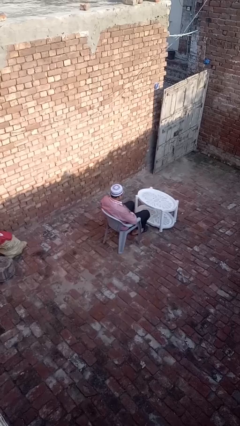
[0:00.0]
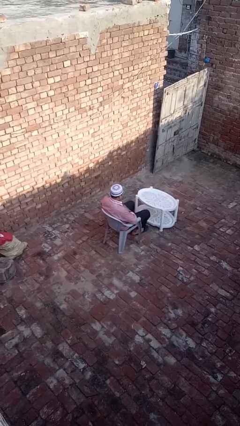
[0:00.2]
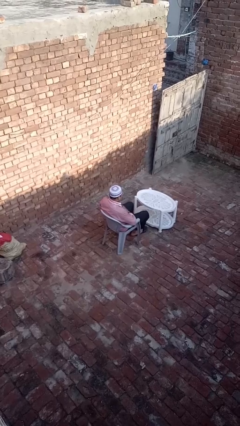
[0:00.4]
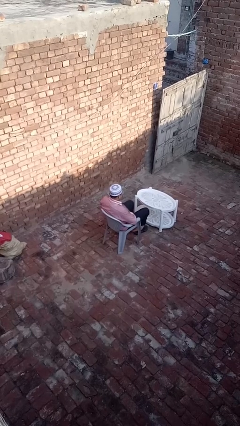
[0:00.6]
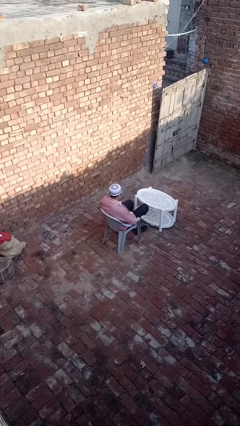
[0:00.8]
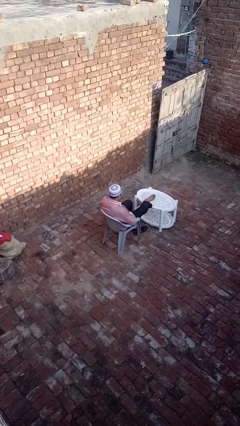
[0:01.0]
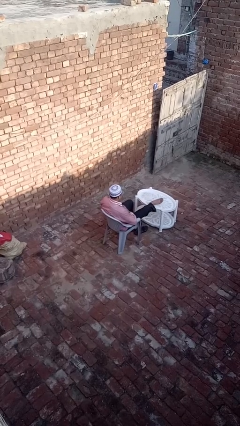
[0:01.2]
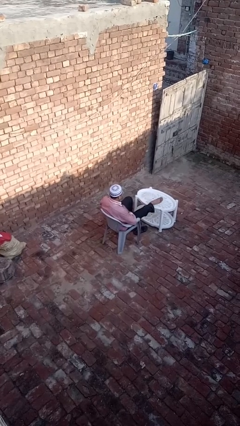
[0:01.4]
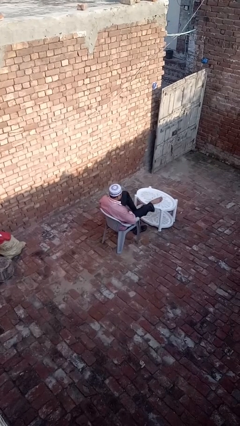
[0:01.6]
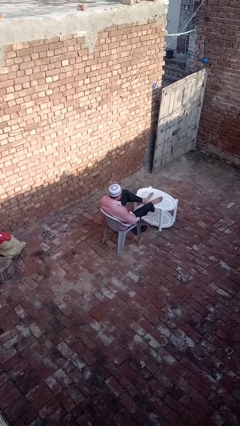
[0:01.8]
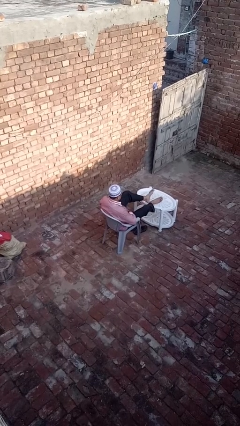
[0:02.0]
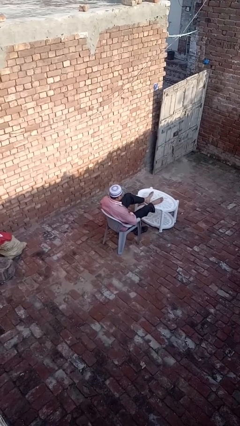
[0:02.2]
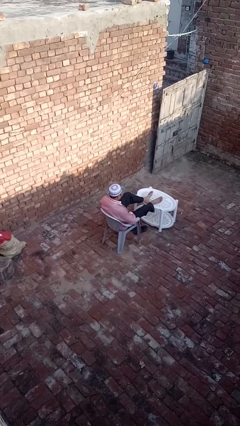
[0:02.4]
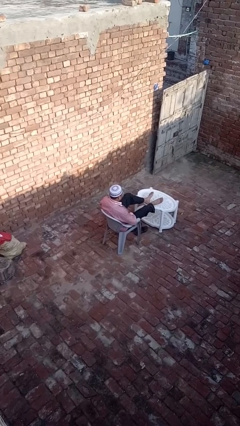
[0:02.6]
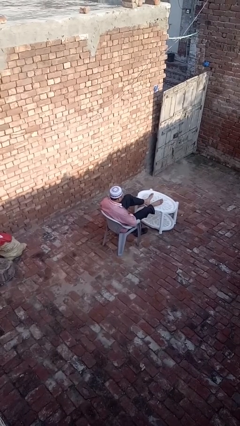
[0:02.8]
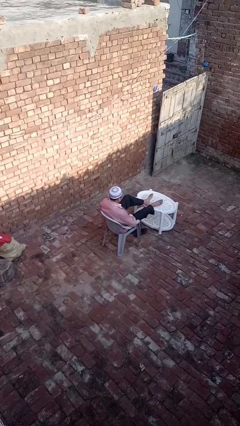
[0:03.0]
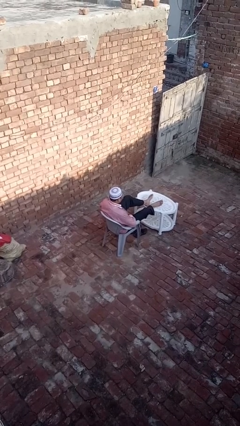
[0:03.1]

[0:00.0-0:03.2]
person puts feet up

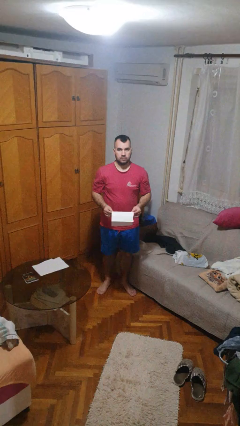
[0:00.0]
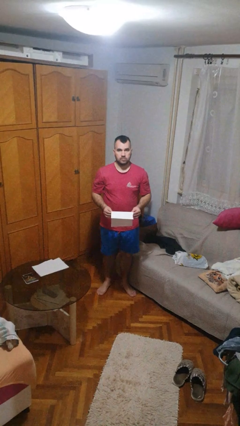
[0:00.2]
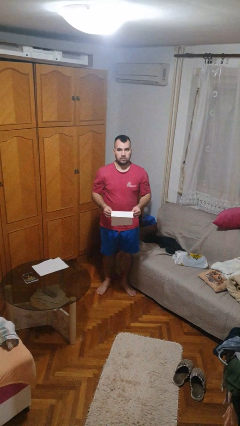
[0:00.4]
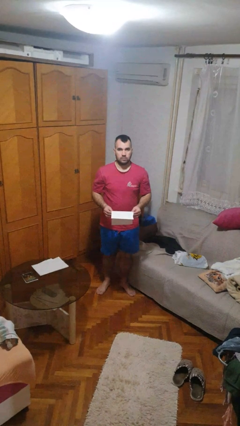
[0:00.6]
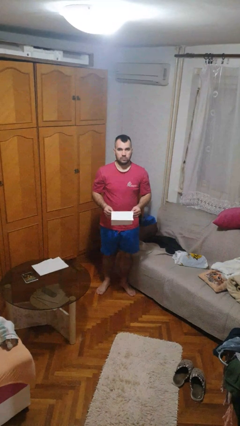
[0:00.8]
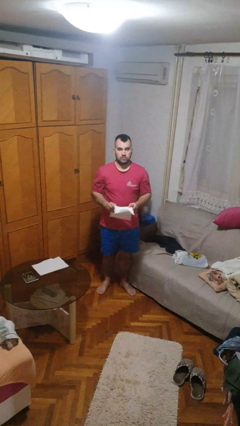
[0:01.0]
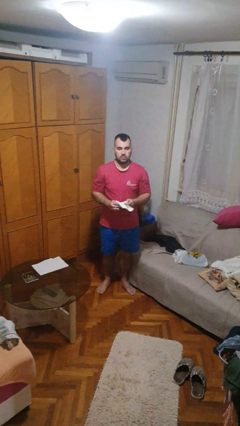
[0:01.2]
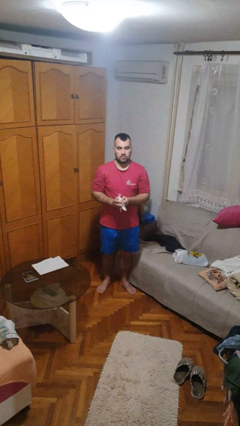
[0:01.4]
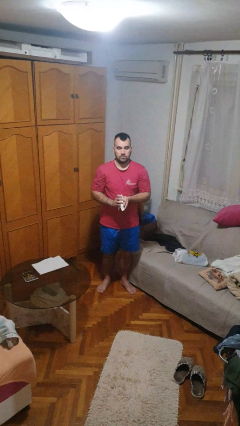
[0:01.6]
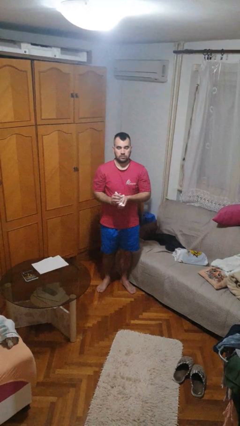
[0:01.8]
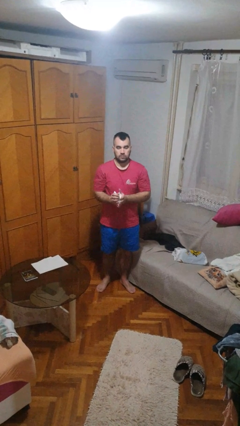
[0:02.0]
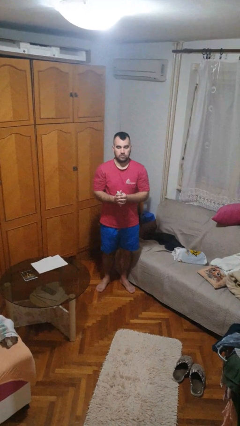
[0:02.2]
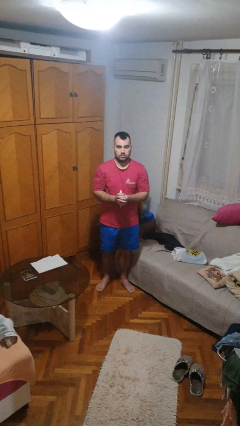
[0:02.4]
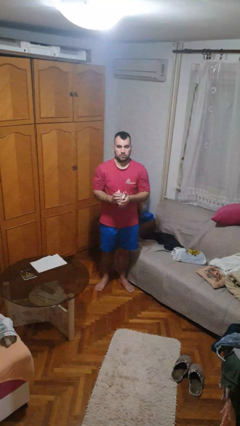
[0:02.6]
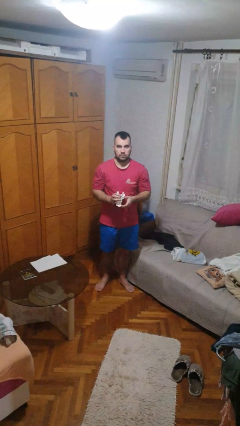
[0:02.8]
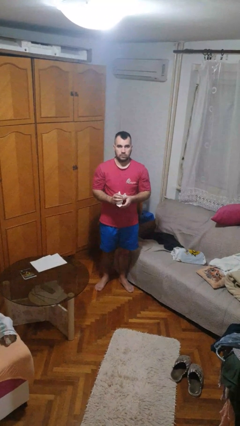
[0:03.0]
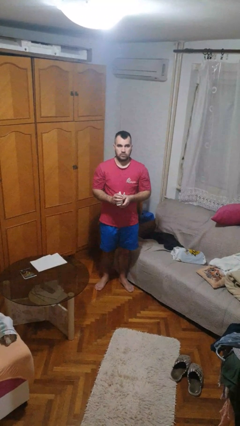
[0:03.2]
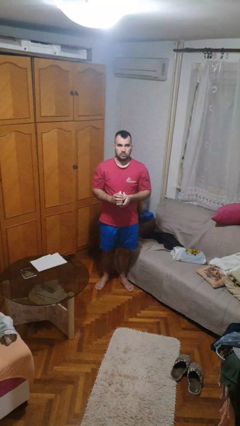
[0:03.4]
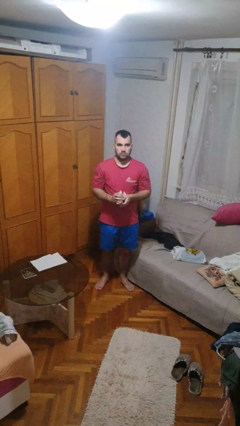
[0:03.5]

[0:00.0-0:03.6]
person crumples paper

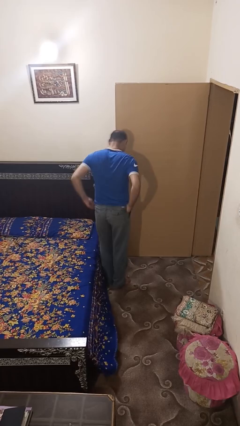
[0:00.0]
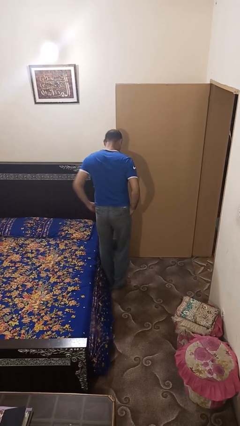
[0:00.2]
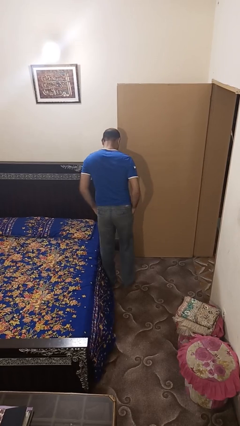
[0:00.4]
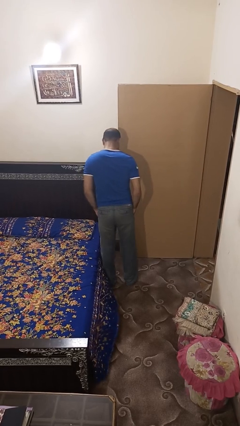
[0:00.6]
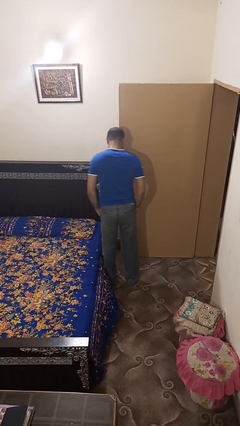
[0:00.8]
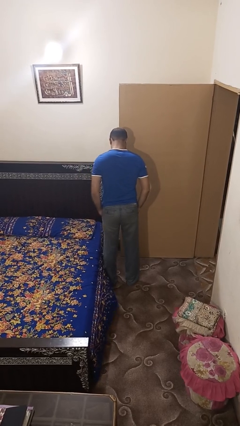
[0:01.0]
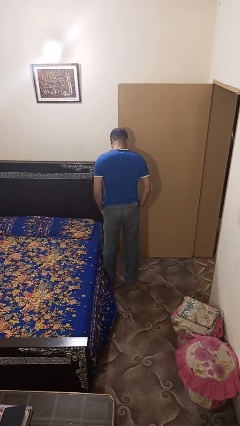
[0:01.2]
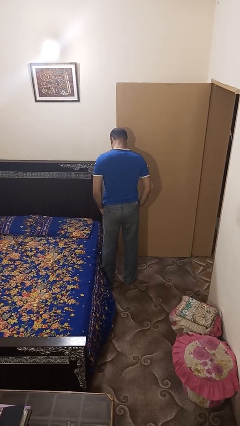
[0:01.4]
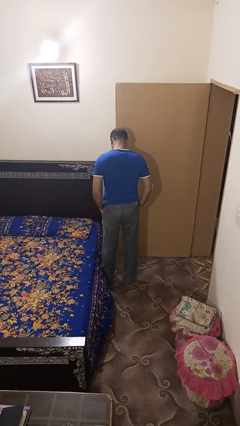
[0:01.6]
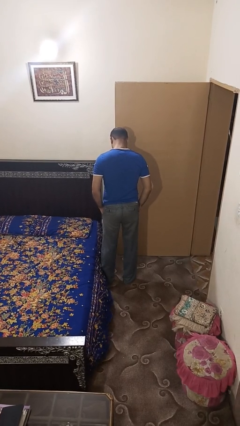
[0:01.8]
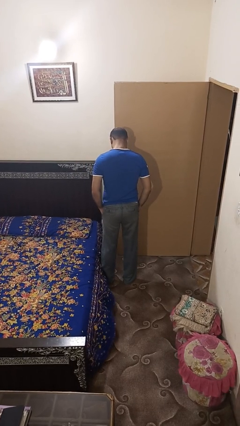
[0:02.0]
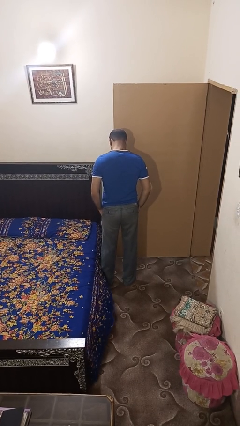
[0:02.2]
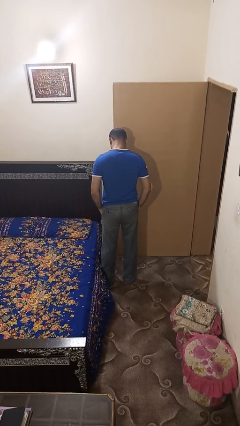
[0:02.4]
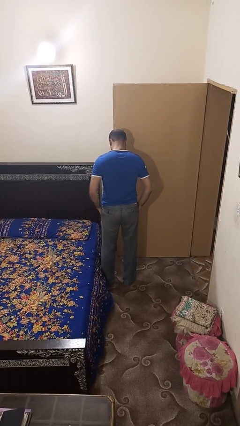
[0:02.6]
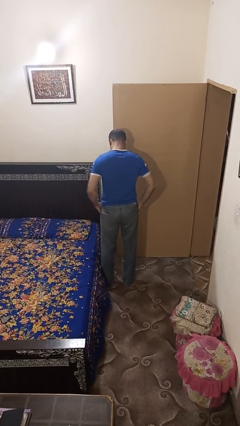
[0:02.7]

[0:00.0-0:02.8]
person puts hands in back pockets

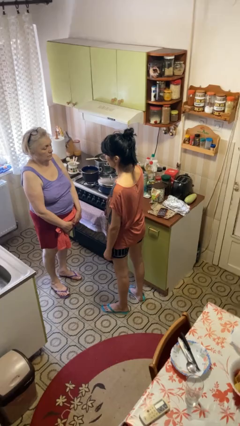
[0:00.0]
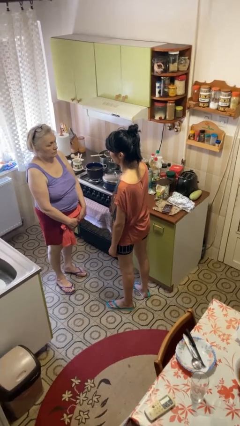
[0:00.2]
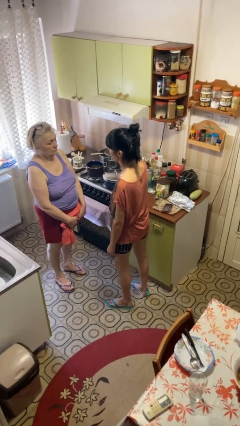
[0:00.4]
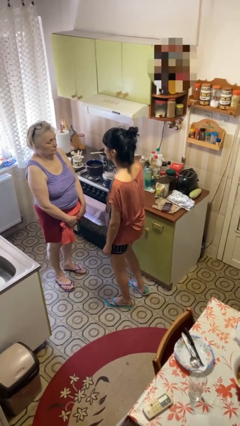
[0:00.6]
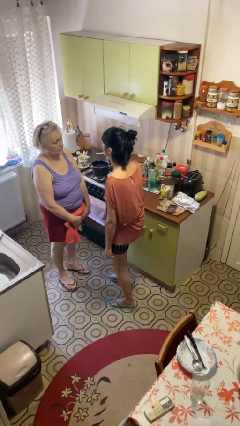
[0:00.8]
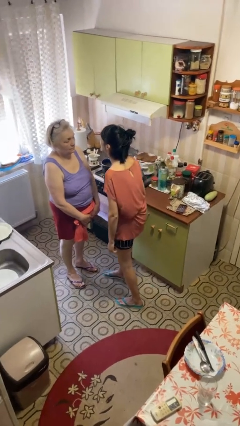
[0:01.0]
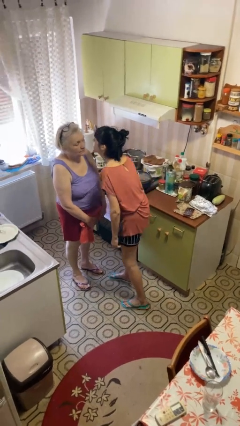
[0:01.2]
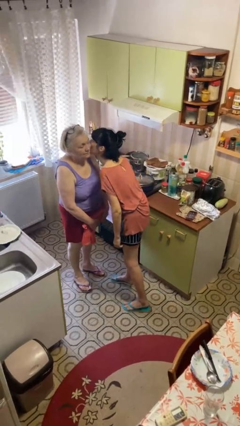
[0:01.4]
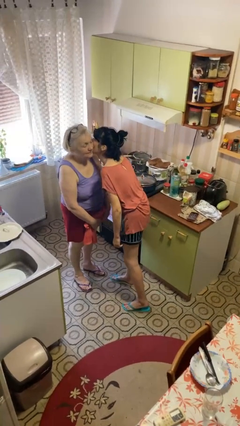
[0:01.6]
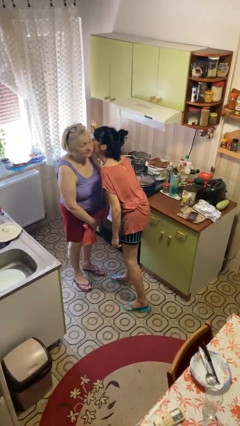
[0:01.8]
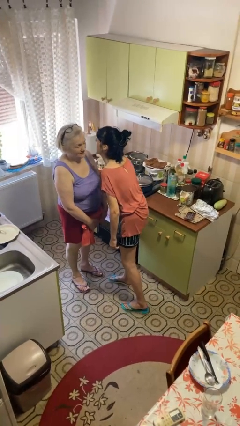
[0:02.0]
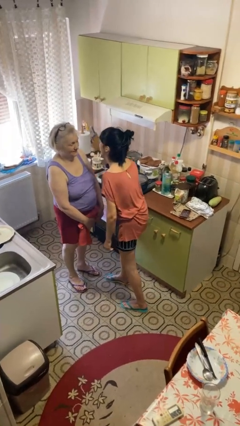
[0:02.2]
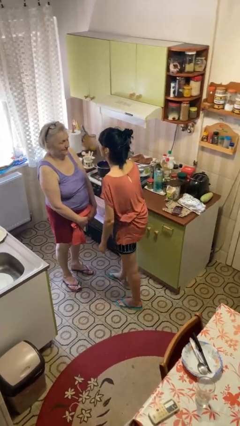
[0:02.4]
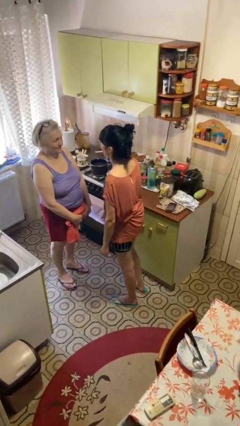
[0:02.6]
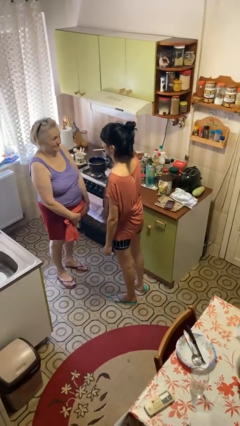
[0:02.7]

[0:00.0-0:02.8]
person kisses cheek of person

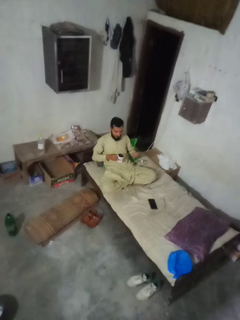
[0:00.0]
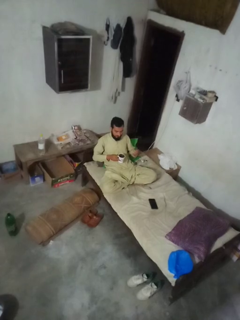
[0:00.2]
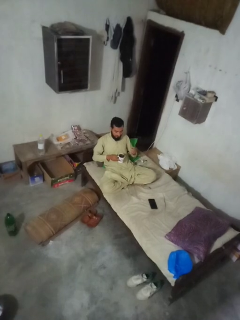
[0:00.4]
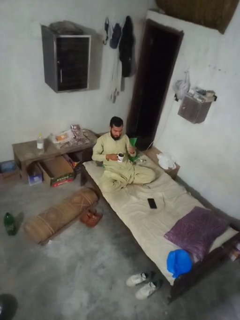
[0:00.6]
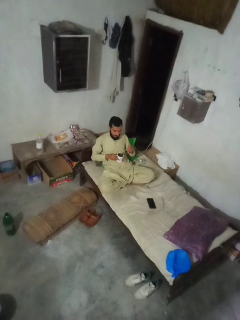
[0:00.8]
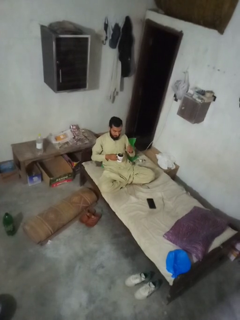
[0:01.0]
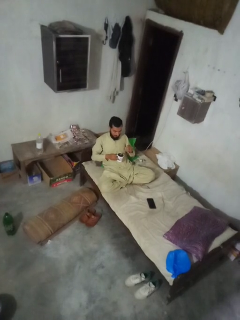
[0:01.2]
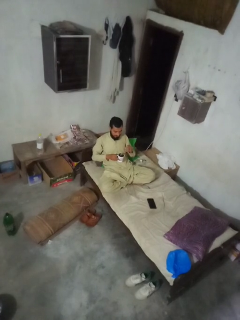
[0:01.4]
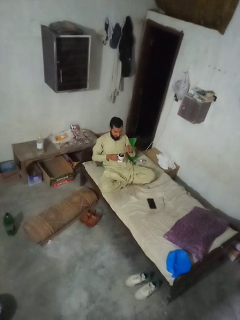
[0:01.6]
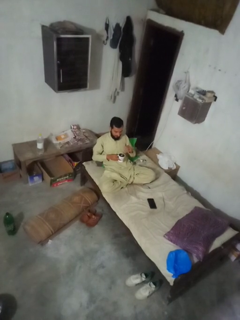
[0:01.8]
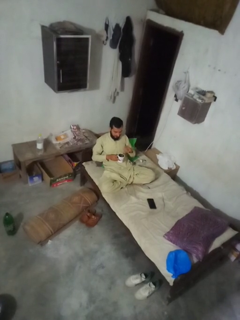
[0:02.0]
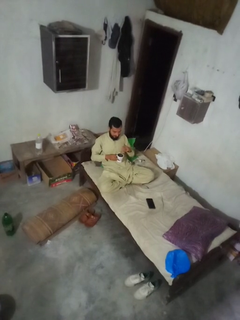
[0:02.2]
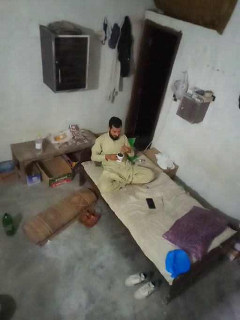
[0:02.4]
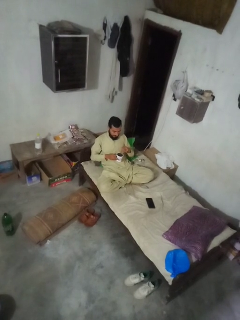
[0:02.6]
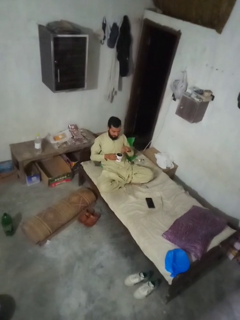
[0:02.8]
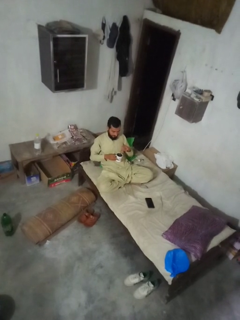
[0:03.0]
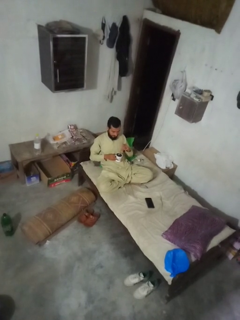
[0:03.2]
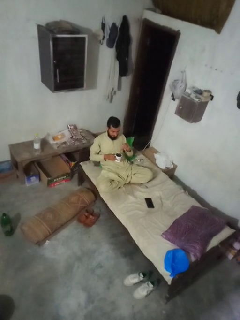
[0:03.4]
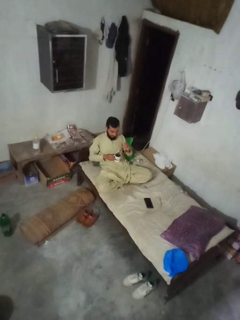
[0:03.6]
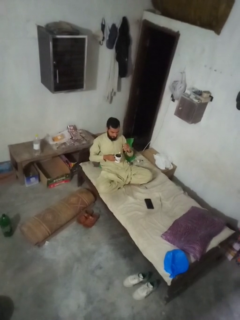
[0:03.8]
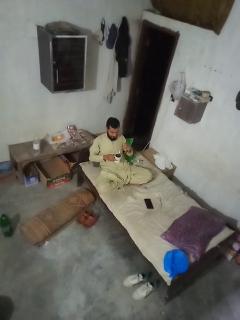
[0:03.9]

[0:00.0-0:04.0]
person stirs mug

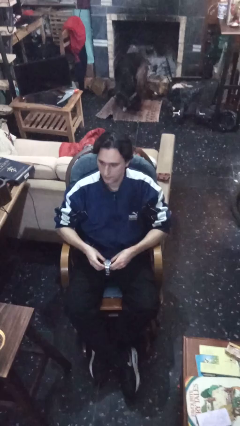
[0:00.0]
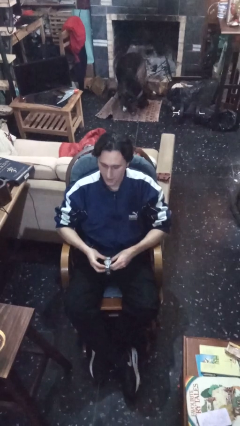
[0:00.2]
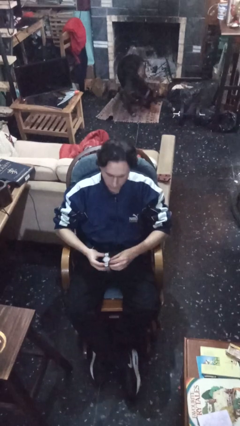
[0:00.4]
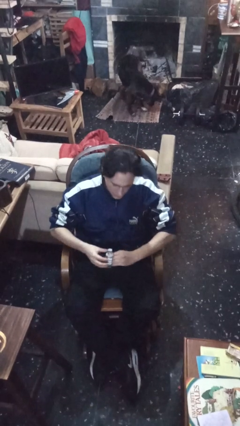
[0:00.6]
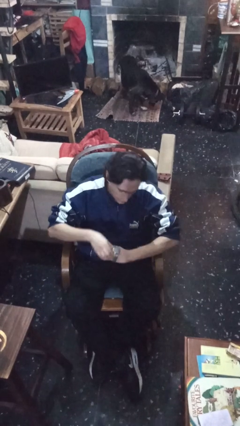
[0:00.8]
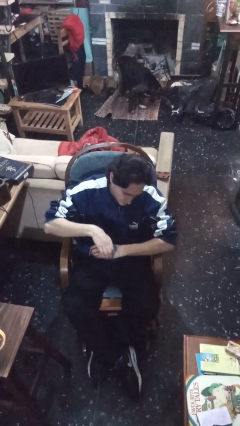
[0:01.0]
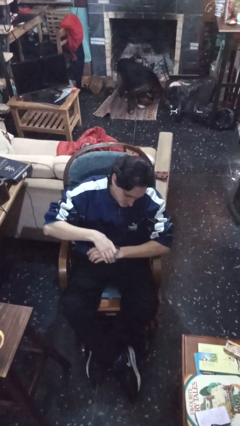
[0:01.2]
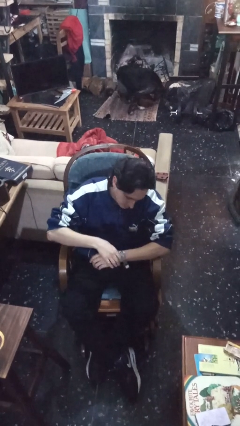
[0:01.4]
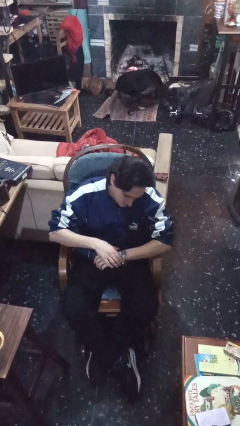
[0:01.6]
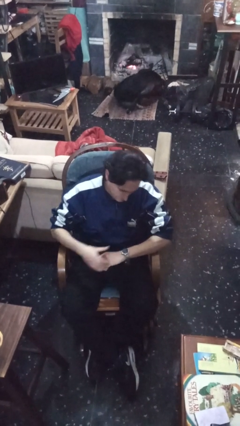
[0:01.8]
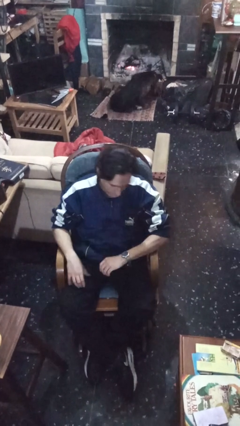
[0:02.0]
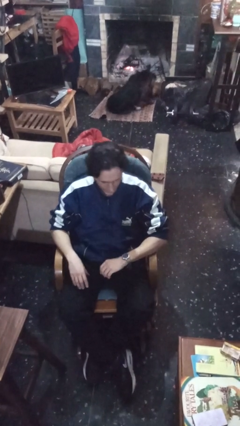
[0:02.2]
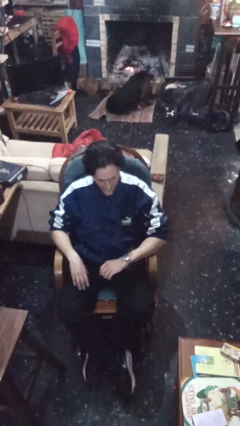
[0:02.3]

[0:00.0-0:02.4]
person puts on wristwatch
